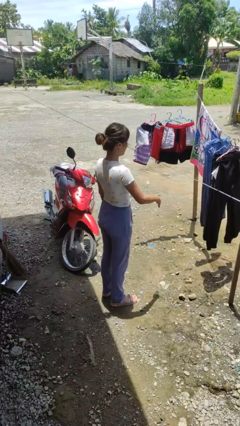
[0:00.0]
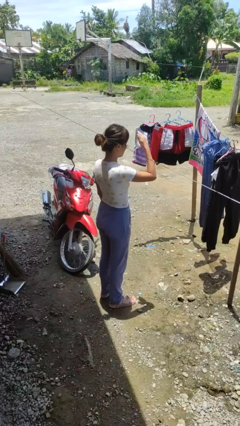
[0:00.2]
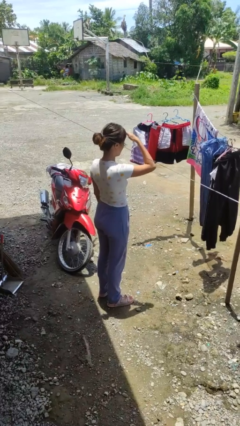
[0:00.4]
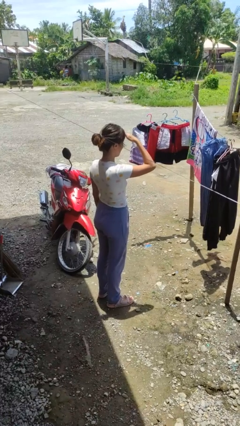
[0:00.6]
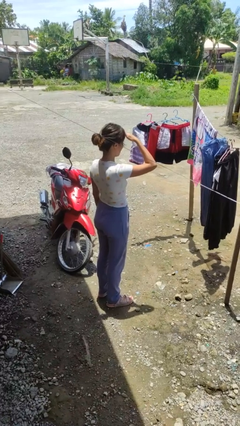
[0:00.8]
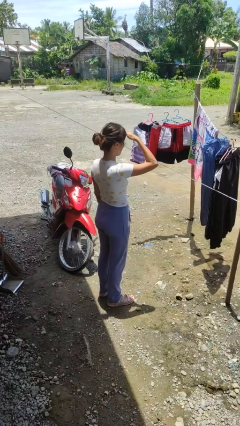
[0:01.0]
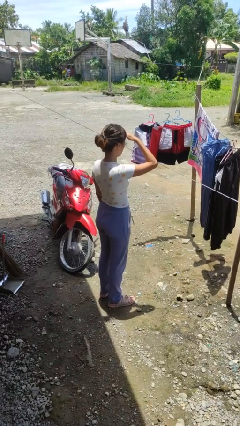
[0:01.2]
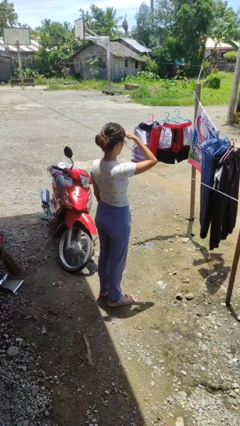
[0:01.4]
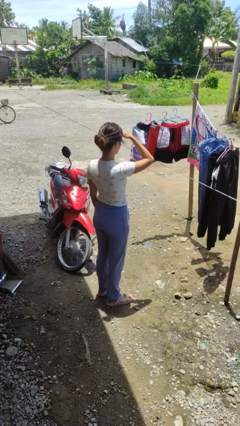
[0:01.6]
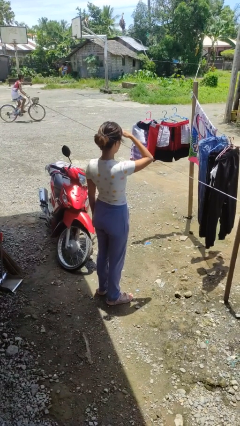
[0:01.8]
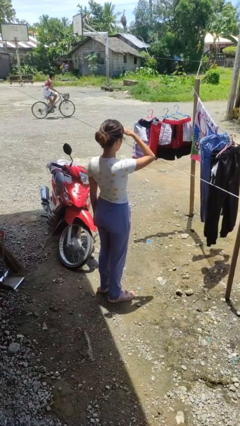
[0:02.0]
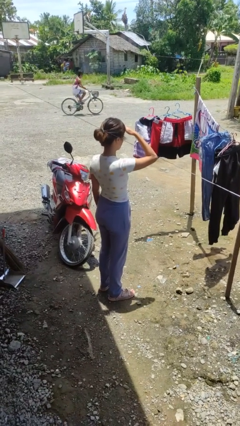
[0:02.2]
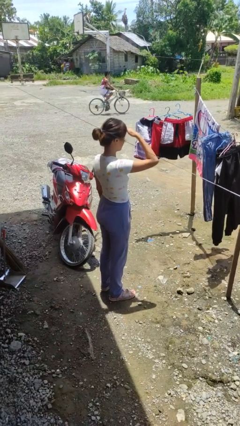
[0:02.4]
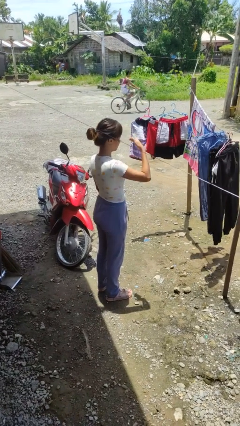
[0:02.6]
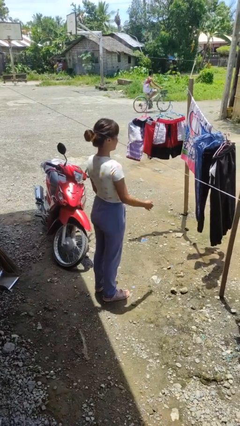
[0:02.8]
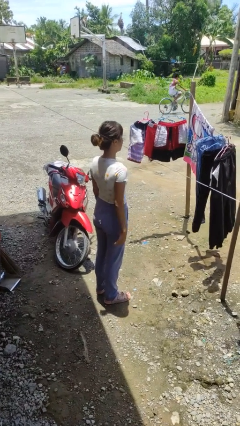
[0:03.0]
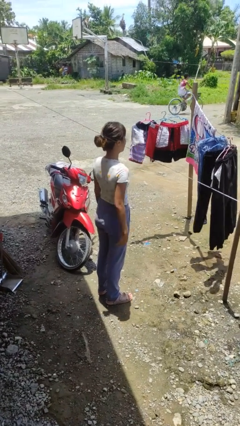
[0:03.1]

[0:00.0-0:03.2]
person shades eyes

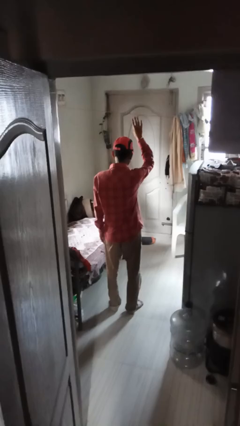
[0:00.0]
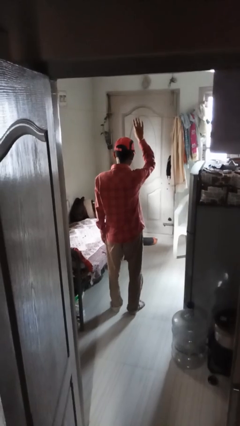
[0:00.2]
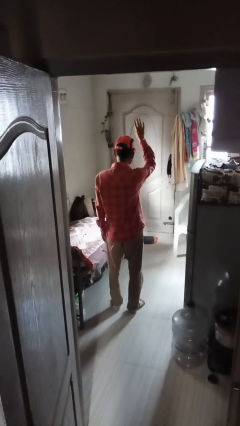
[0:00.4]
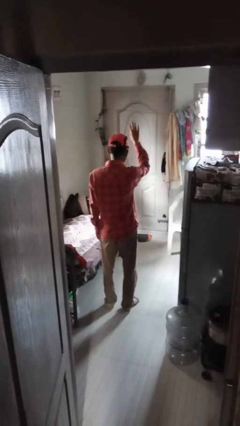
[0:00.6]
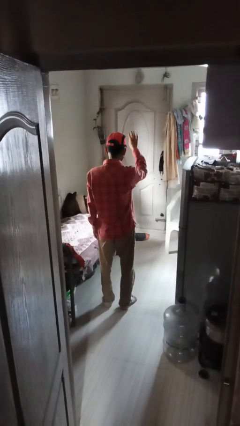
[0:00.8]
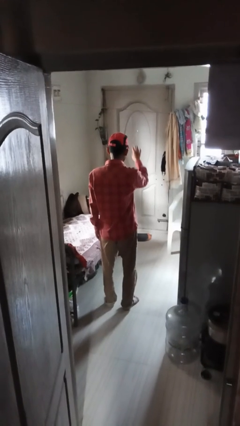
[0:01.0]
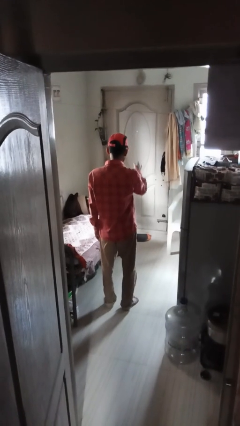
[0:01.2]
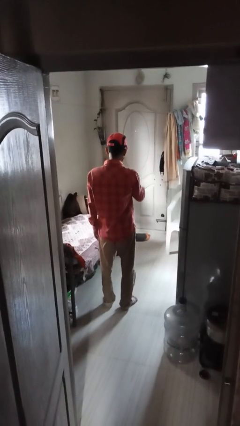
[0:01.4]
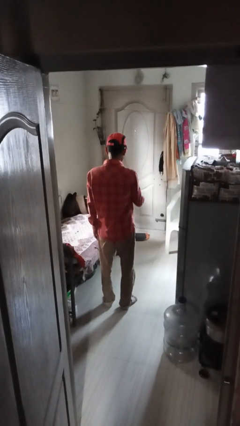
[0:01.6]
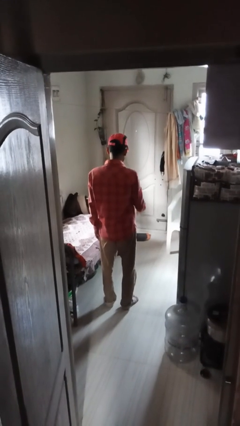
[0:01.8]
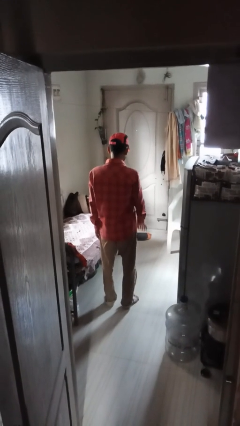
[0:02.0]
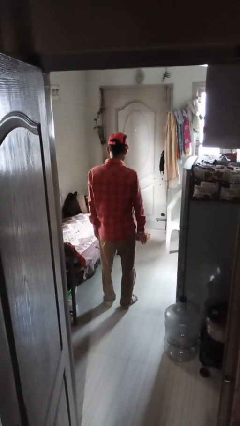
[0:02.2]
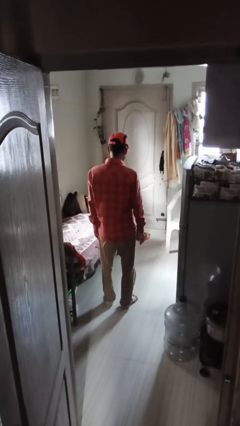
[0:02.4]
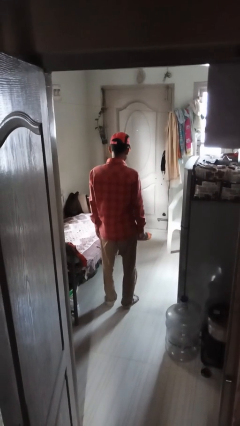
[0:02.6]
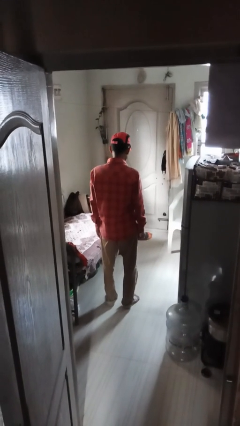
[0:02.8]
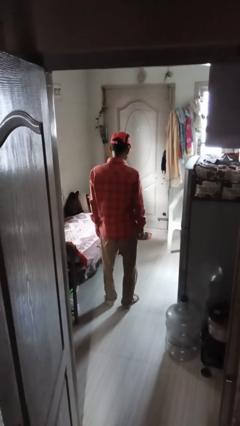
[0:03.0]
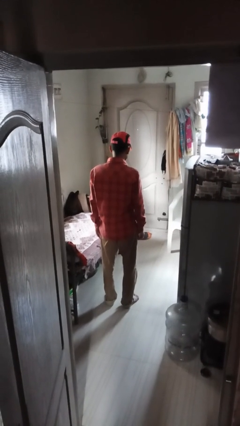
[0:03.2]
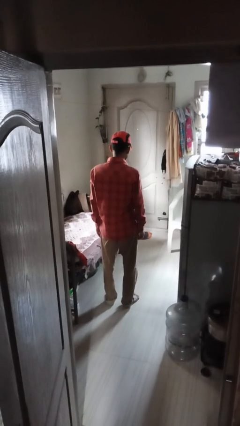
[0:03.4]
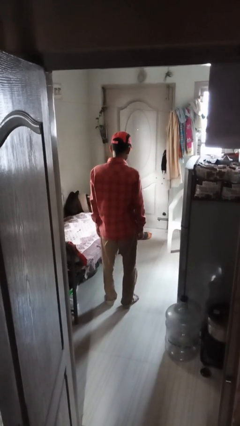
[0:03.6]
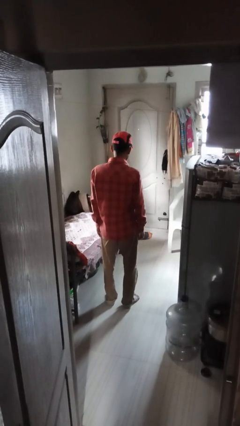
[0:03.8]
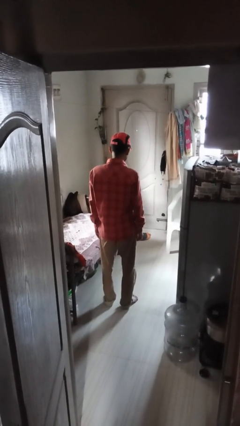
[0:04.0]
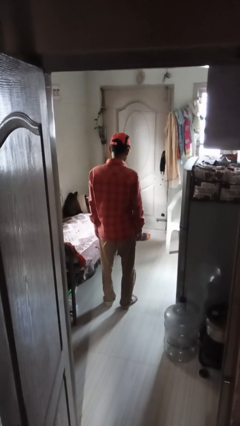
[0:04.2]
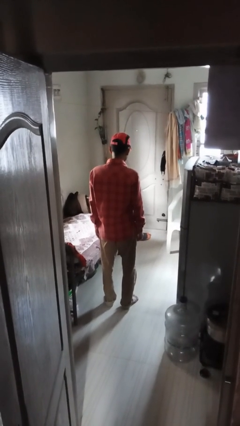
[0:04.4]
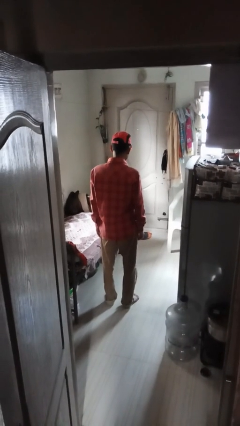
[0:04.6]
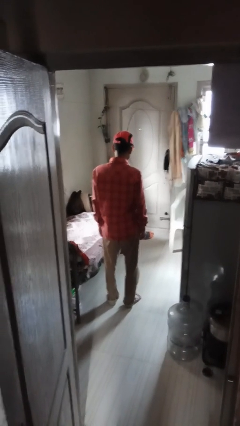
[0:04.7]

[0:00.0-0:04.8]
person gestures lower hand

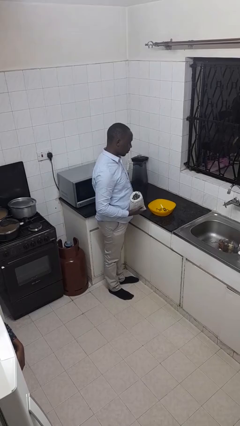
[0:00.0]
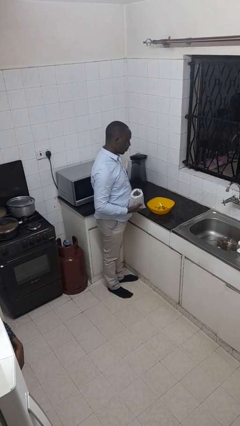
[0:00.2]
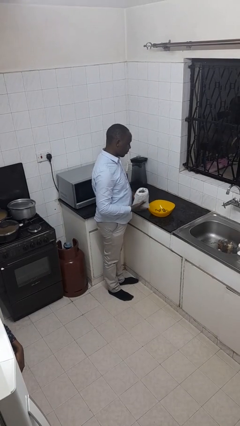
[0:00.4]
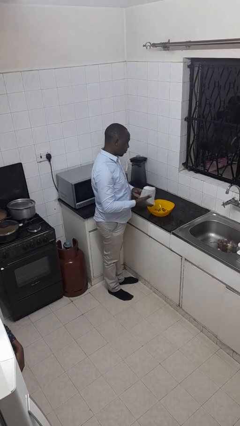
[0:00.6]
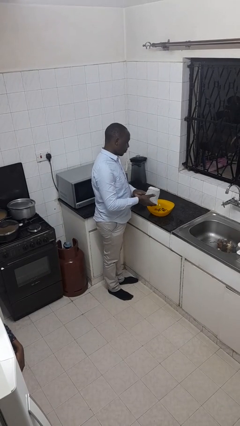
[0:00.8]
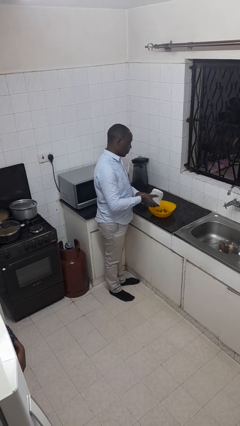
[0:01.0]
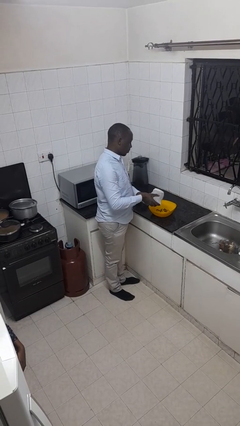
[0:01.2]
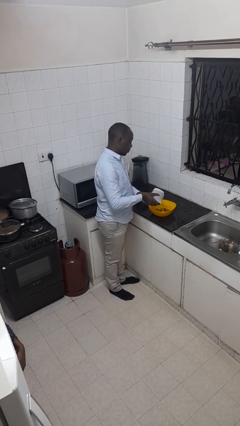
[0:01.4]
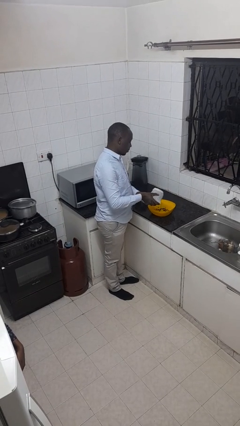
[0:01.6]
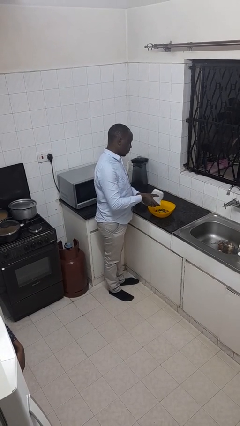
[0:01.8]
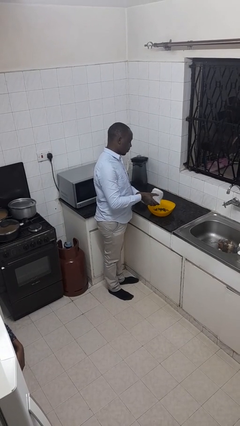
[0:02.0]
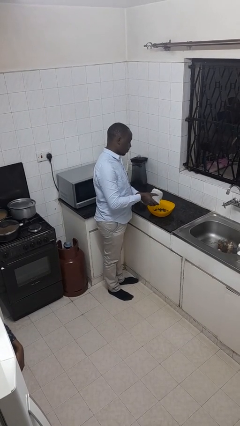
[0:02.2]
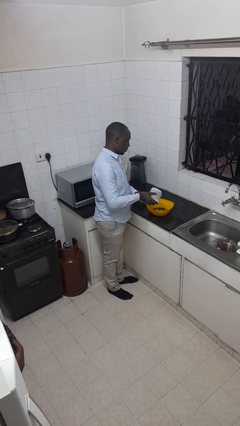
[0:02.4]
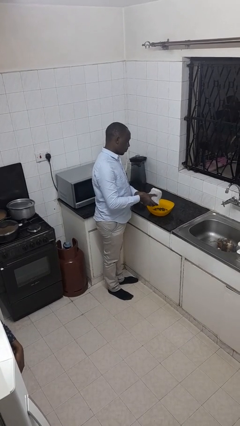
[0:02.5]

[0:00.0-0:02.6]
person pours into bowl

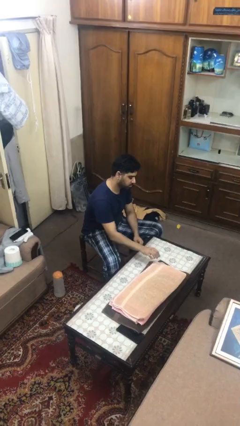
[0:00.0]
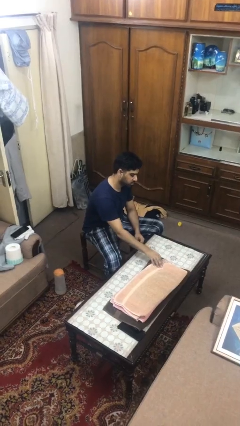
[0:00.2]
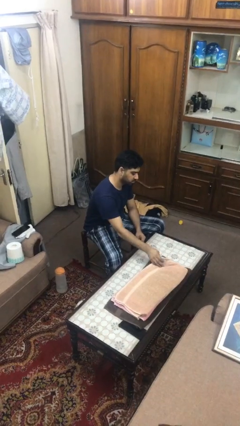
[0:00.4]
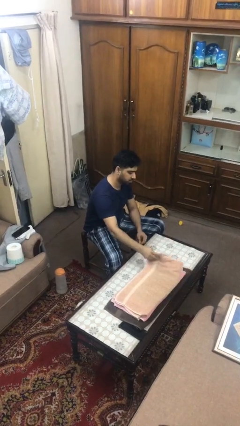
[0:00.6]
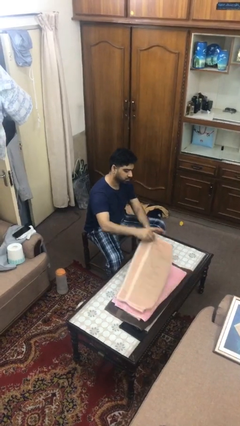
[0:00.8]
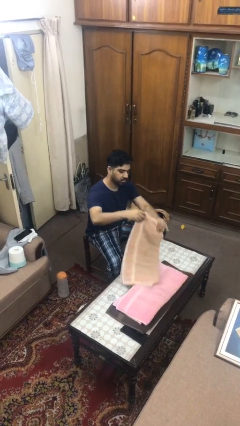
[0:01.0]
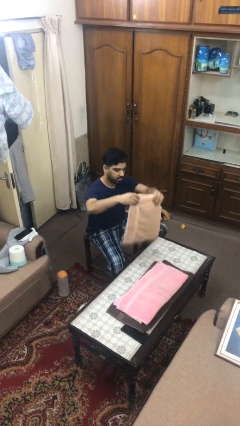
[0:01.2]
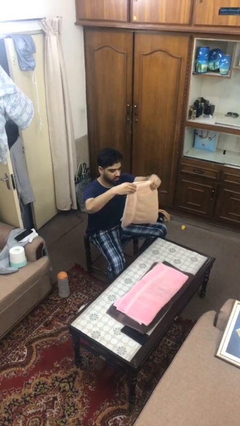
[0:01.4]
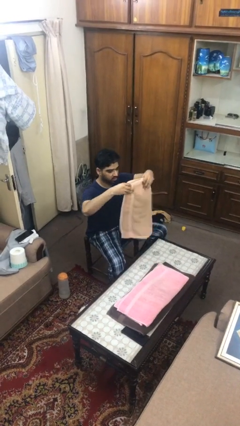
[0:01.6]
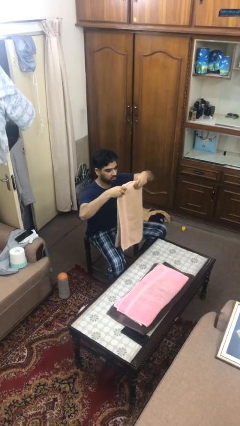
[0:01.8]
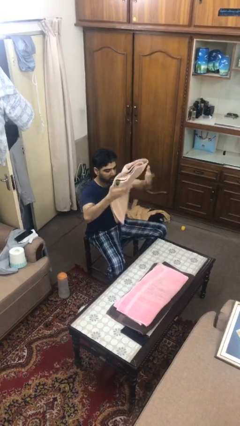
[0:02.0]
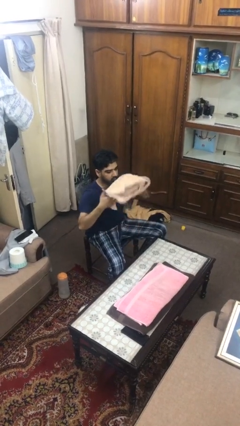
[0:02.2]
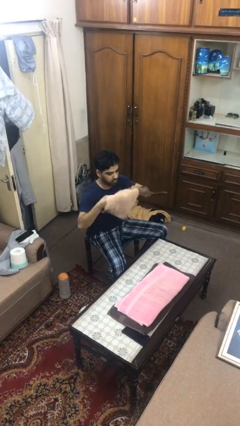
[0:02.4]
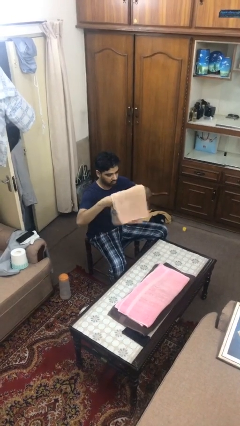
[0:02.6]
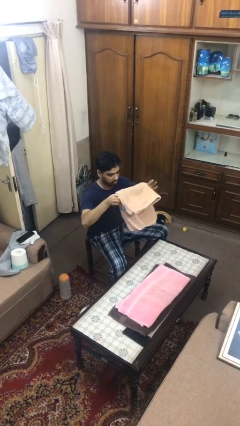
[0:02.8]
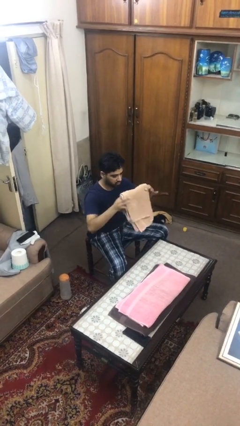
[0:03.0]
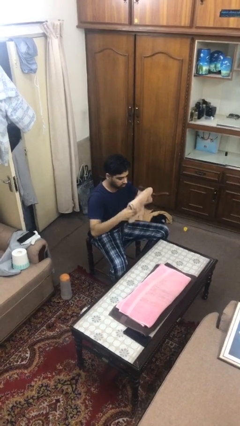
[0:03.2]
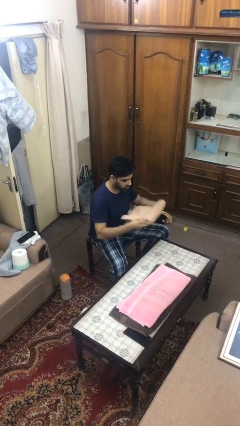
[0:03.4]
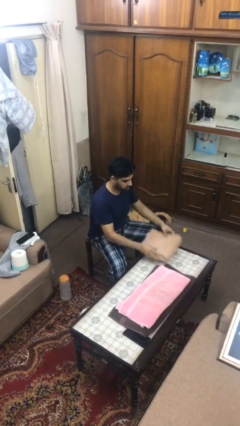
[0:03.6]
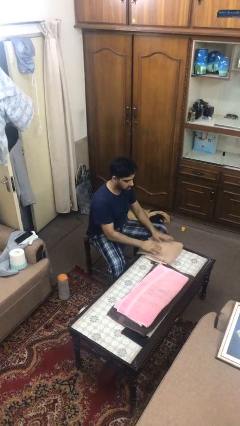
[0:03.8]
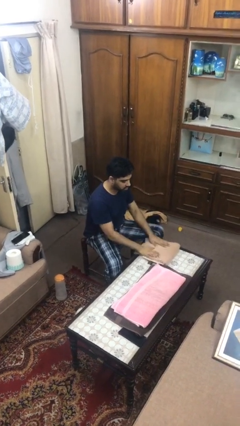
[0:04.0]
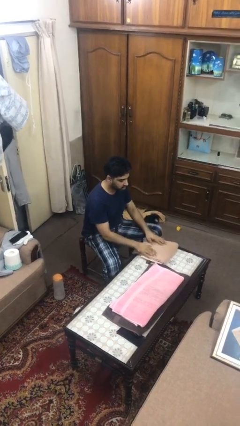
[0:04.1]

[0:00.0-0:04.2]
person folds towel

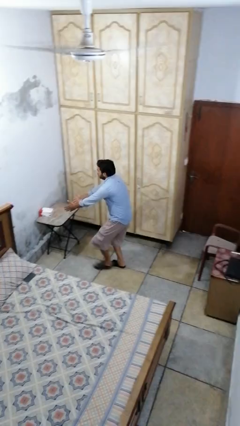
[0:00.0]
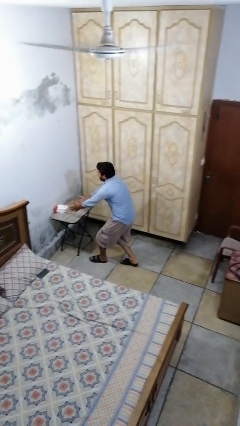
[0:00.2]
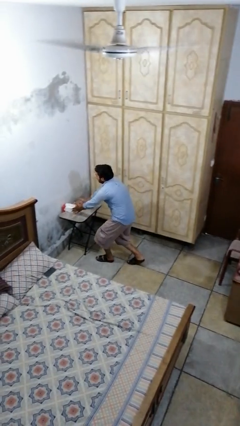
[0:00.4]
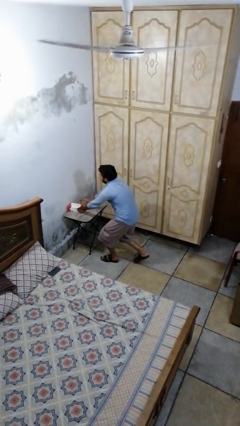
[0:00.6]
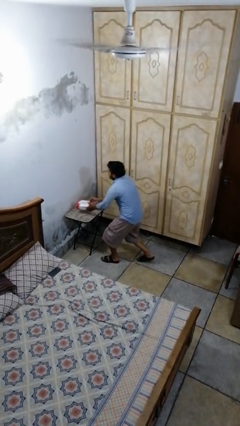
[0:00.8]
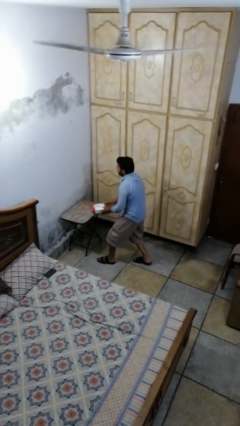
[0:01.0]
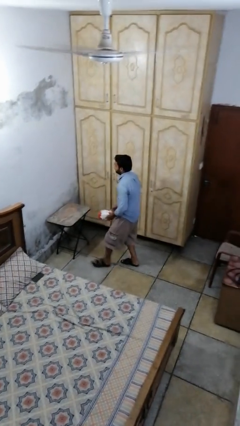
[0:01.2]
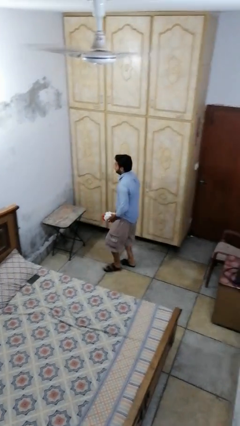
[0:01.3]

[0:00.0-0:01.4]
person picks up object from table

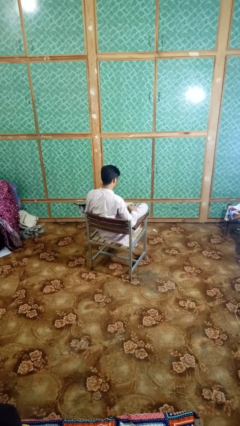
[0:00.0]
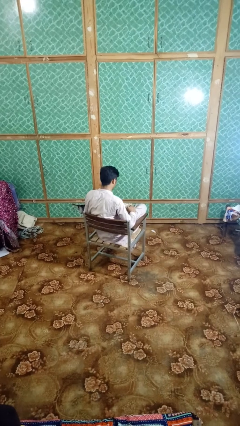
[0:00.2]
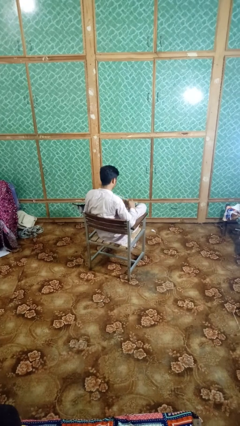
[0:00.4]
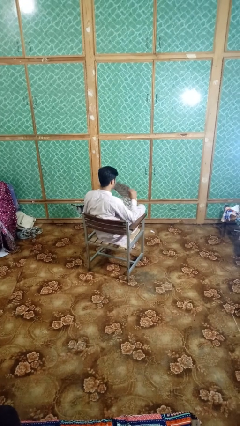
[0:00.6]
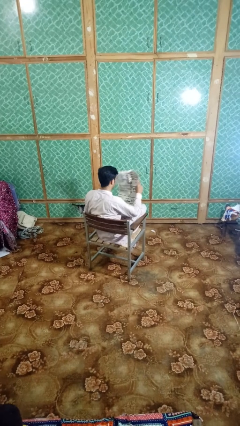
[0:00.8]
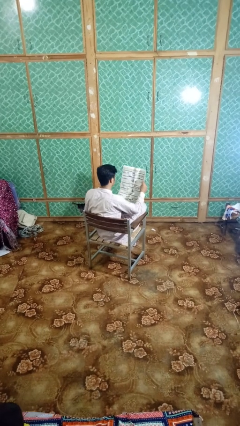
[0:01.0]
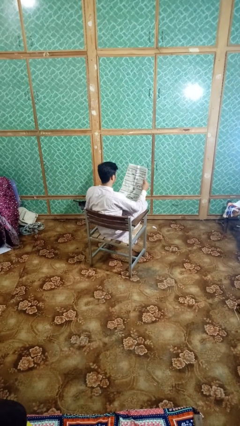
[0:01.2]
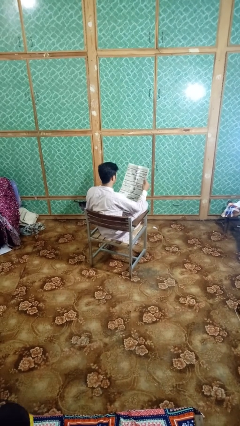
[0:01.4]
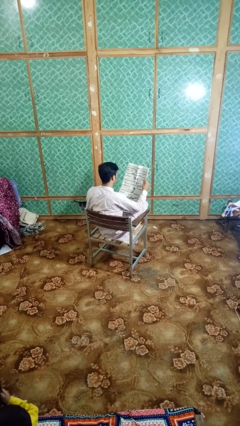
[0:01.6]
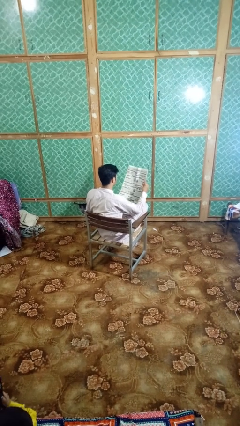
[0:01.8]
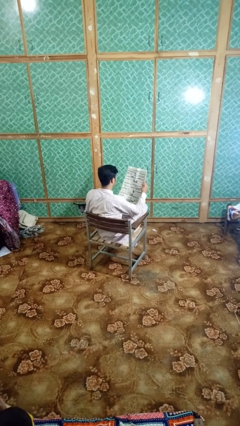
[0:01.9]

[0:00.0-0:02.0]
person reads newspaper
